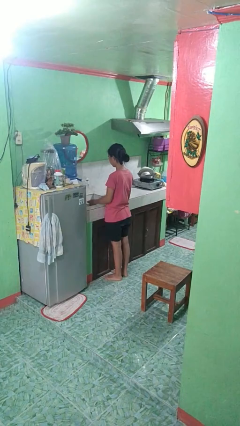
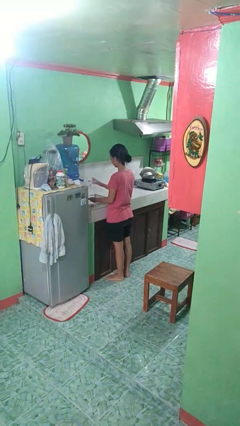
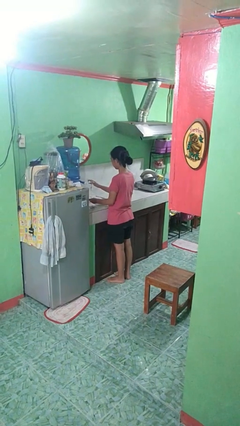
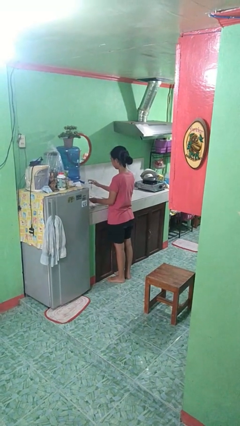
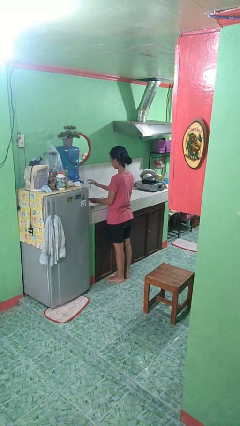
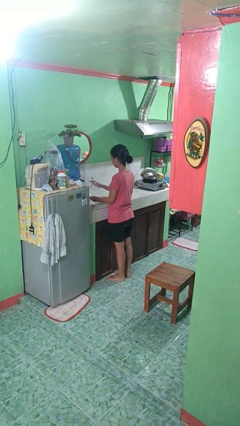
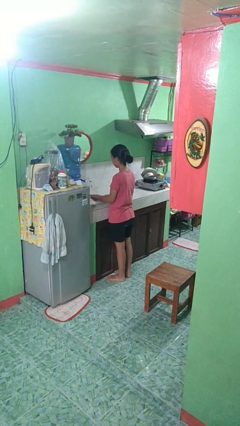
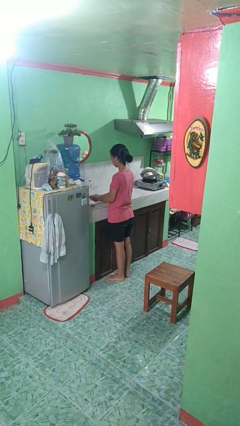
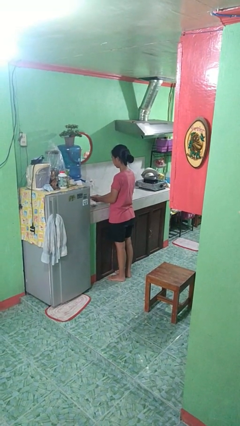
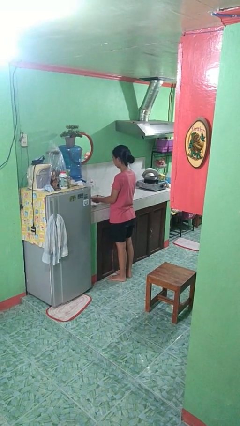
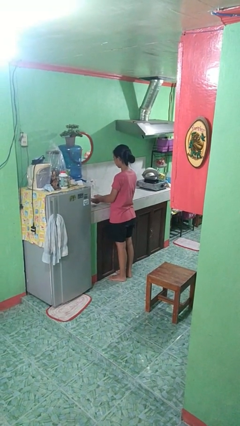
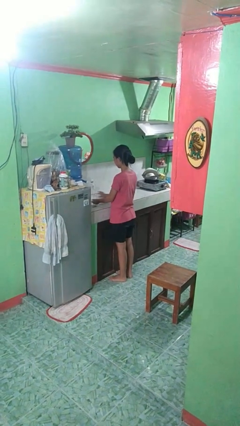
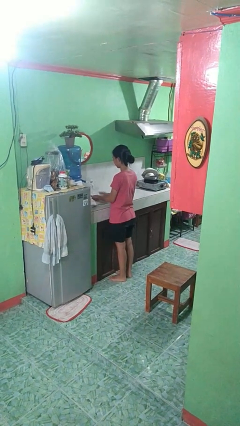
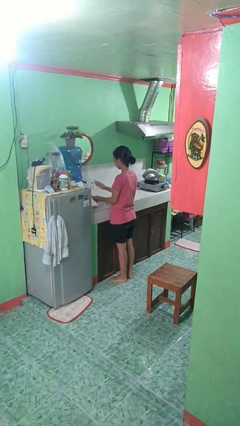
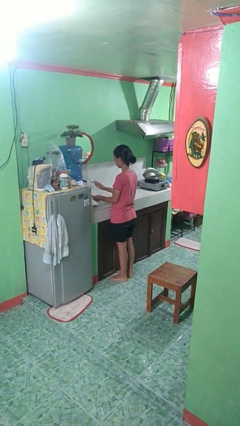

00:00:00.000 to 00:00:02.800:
person washes dish

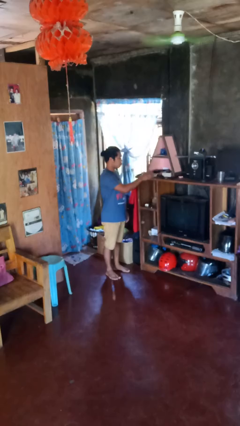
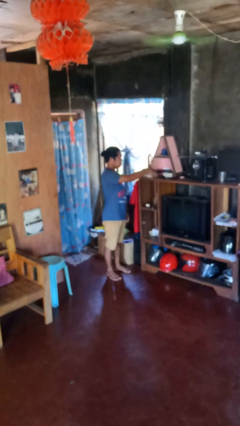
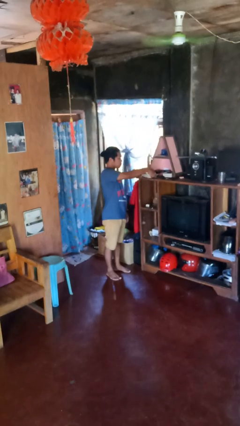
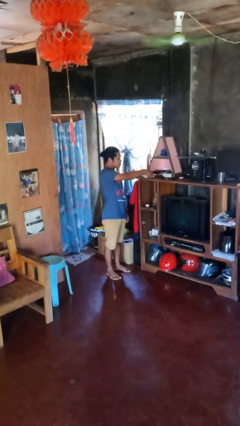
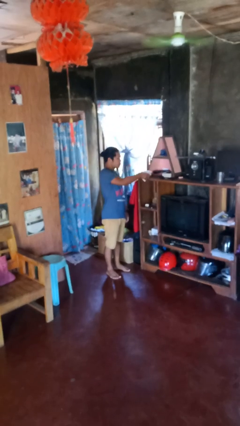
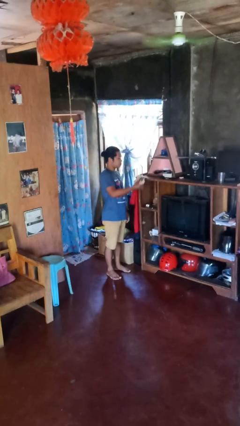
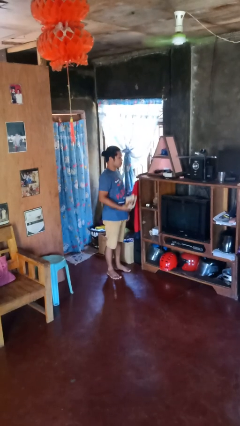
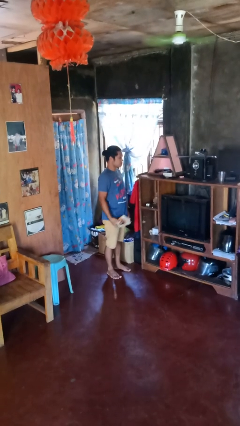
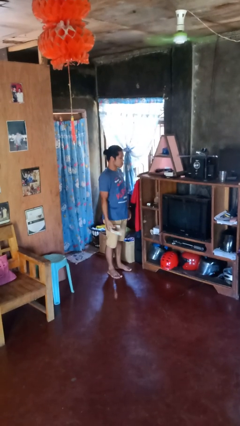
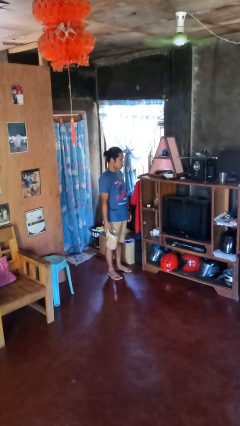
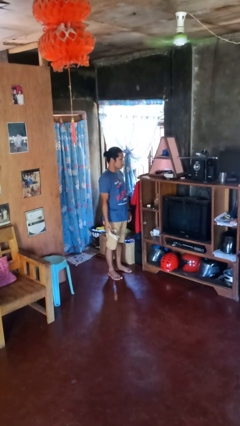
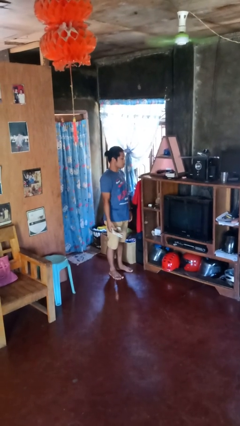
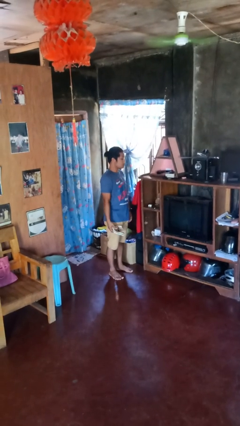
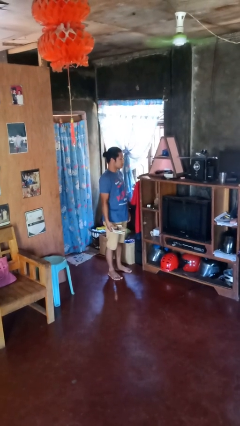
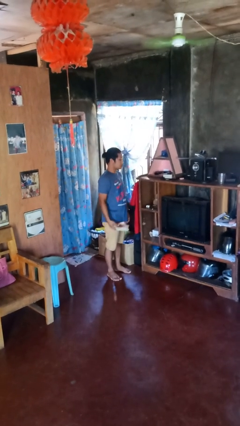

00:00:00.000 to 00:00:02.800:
person picks up object from shelf

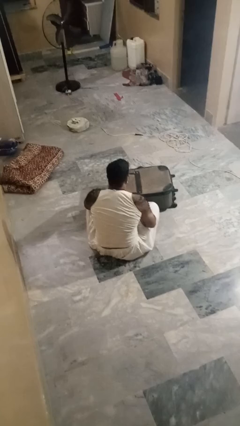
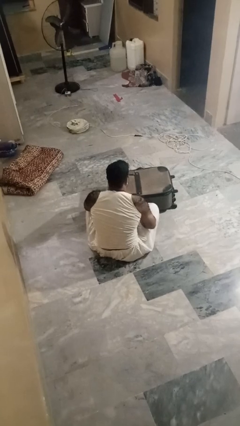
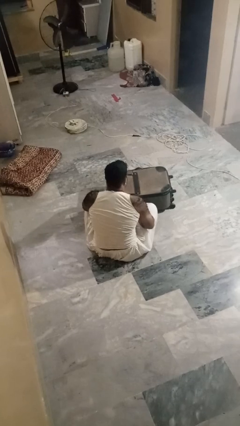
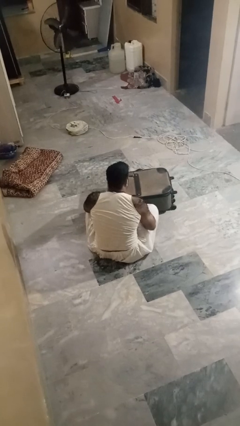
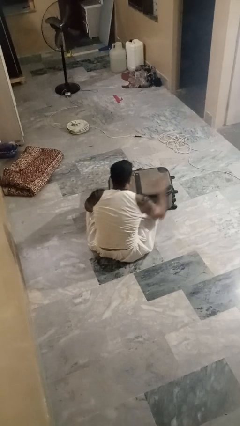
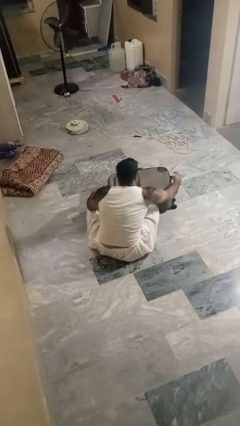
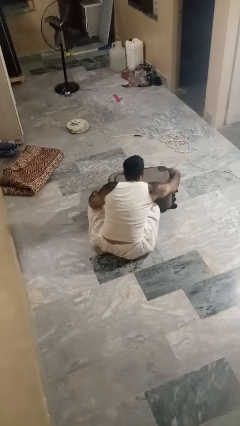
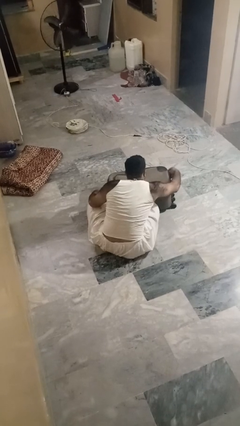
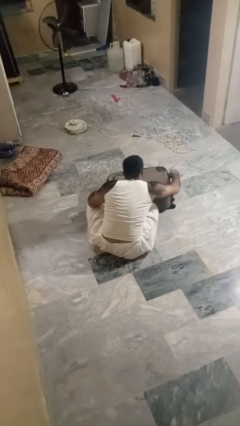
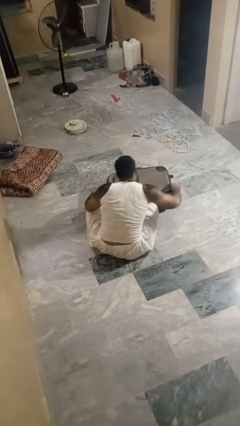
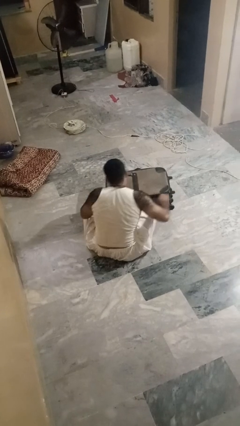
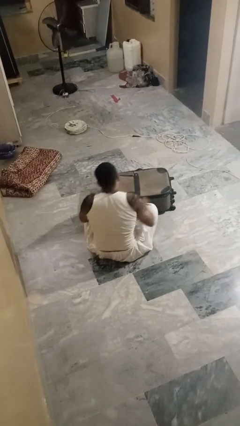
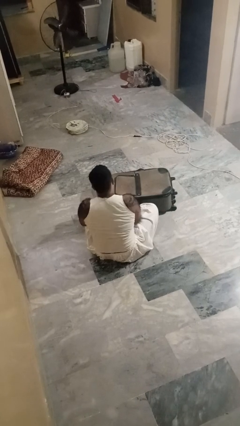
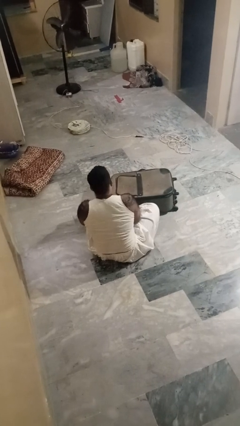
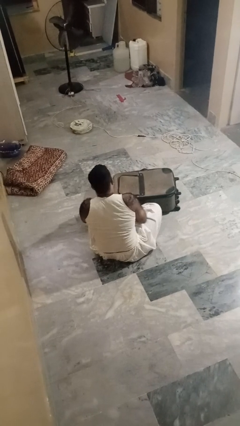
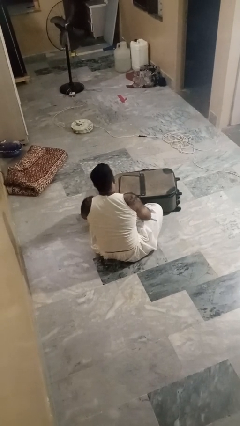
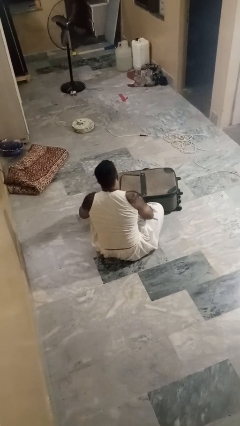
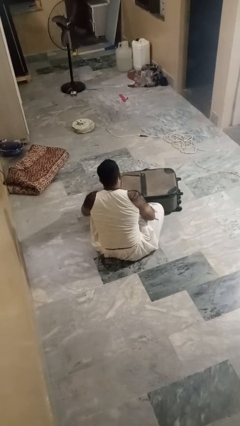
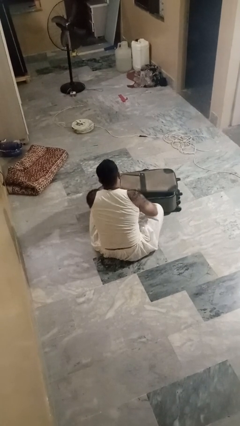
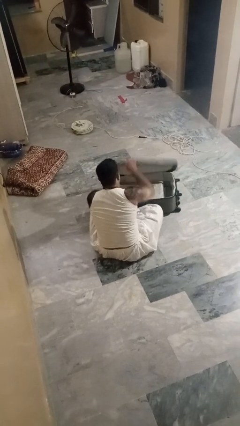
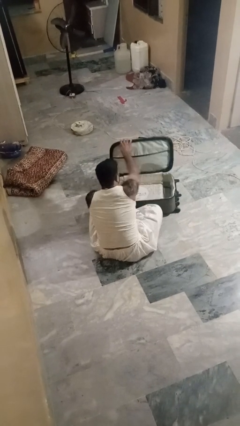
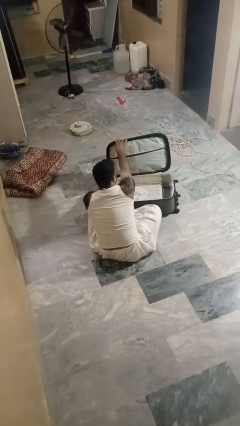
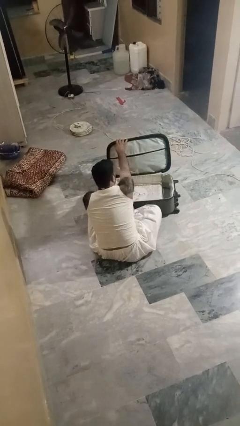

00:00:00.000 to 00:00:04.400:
person opens suitcase

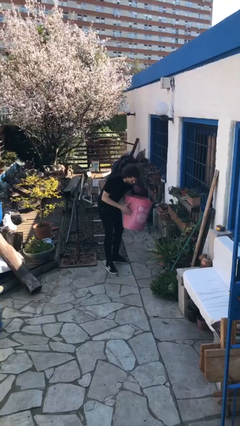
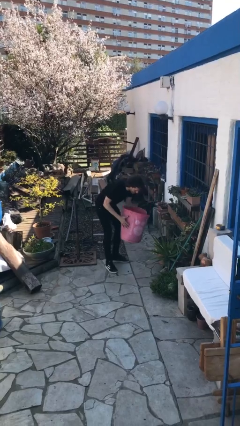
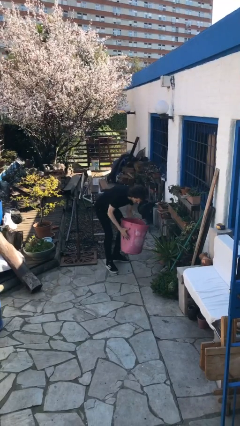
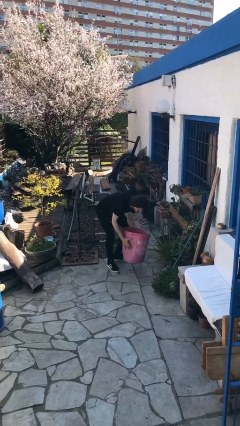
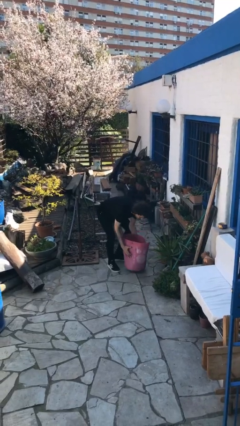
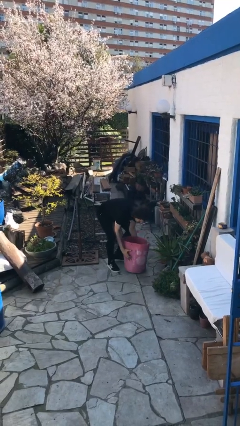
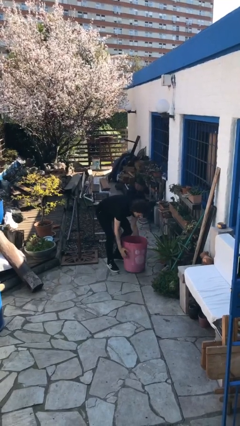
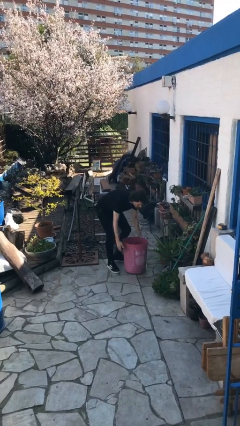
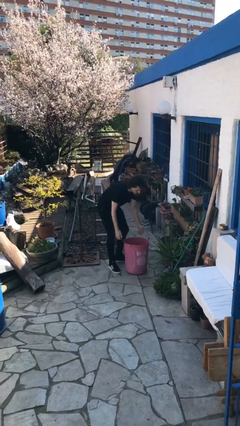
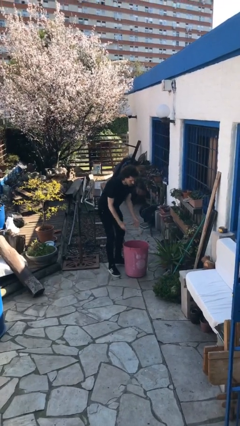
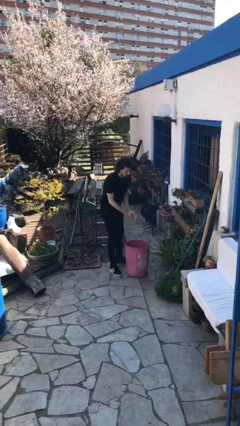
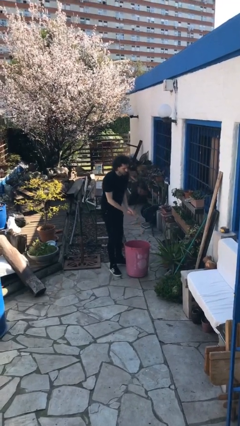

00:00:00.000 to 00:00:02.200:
person puts down object on floor

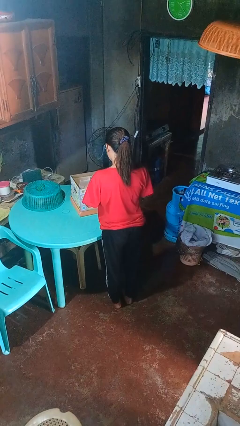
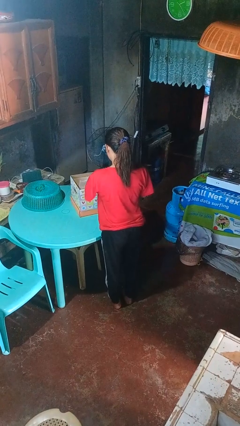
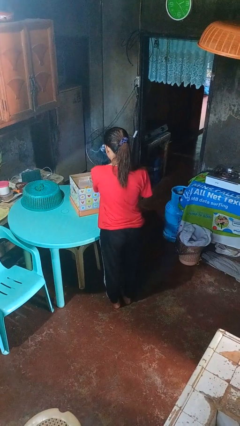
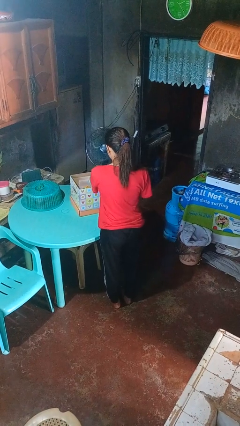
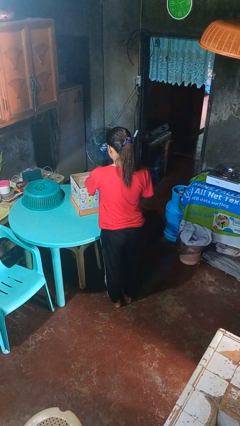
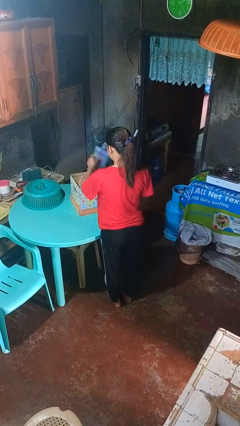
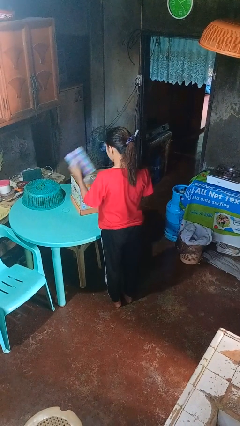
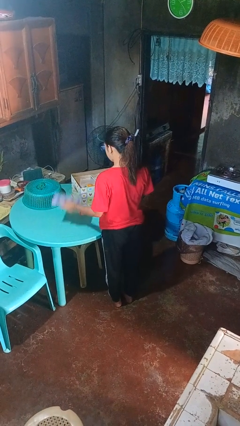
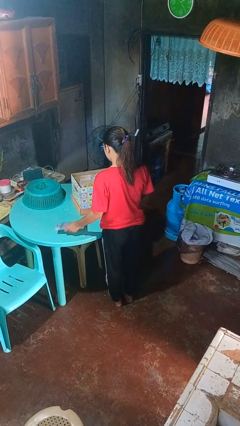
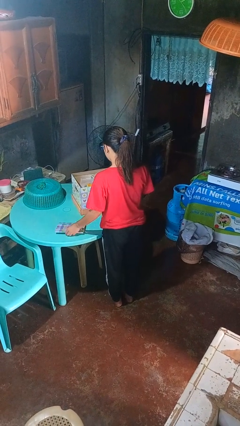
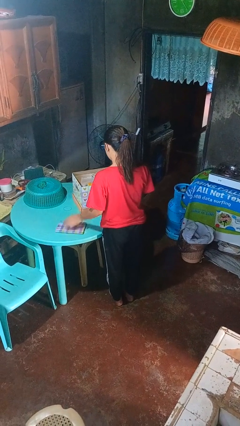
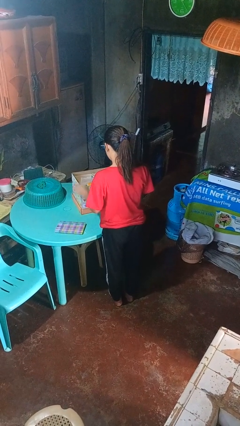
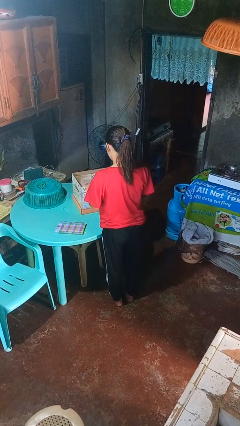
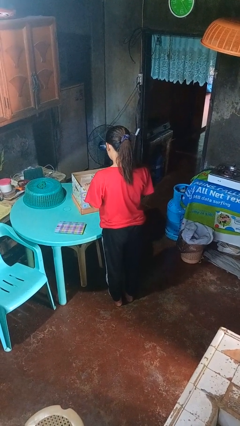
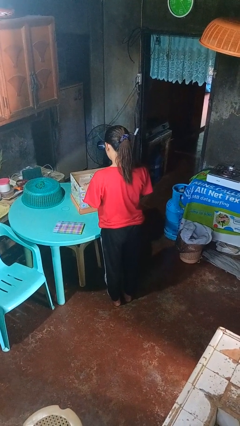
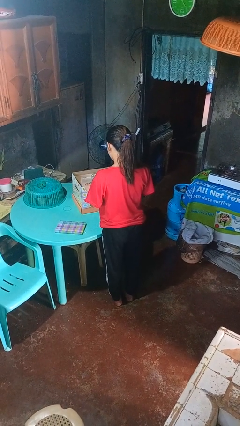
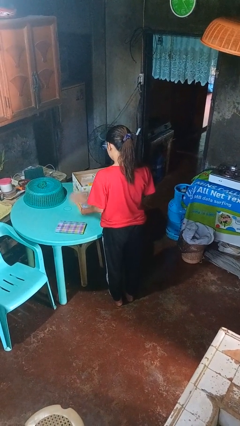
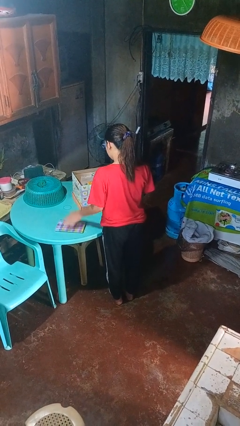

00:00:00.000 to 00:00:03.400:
person takes object from box

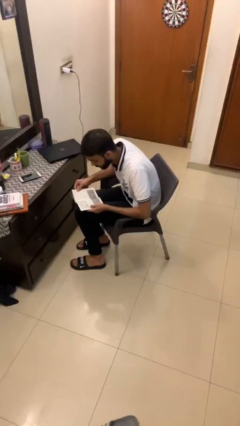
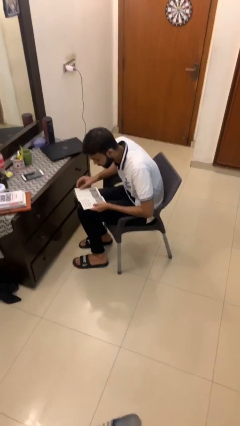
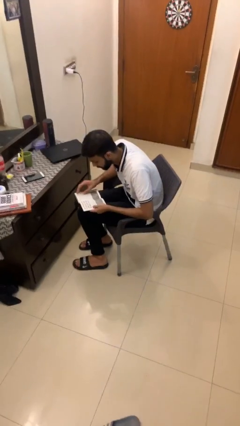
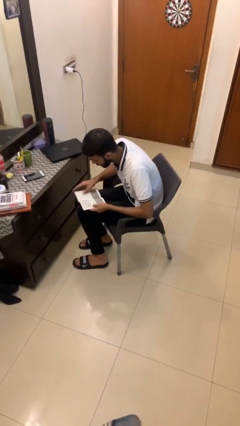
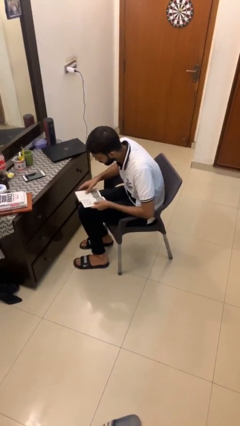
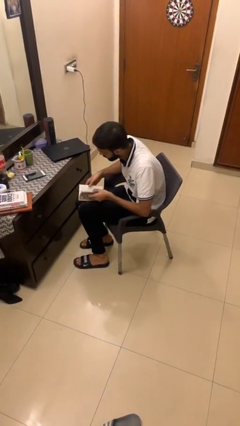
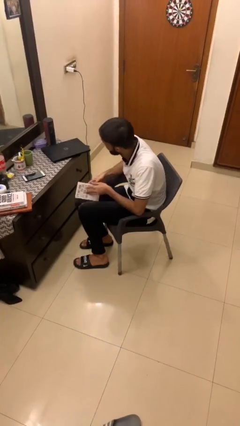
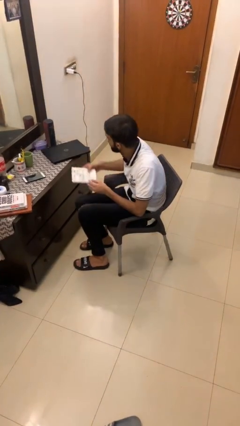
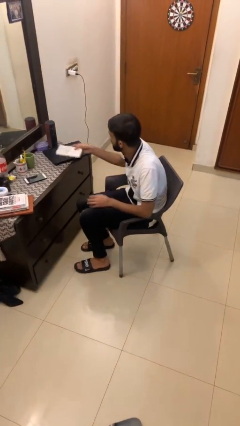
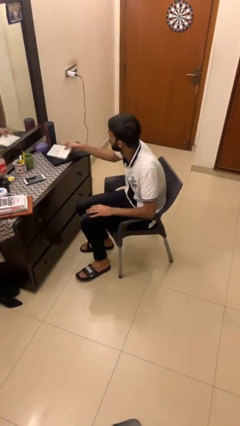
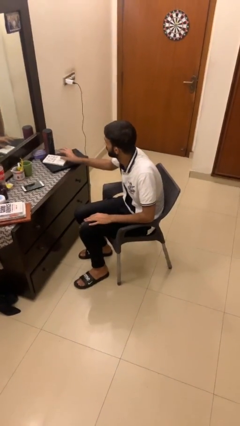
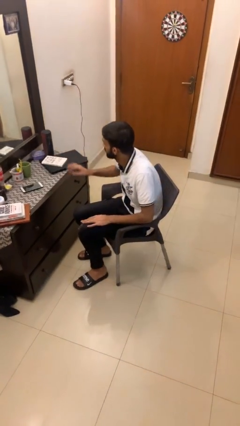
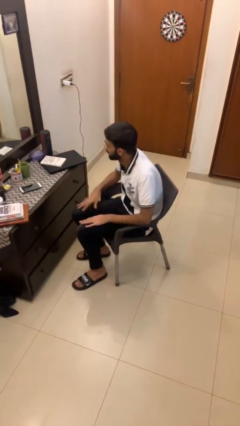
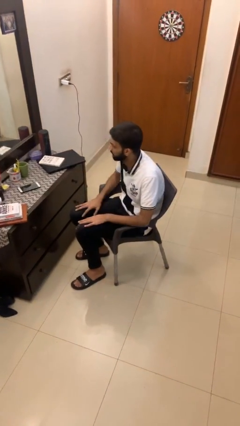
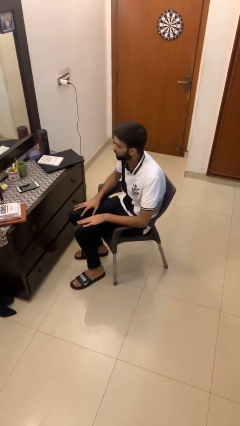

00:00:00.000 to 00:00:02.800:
person puts down object on table
